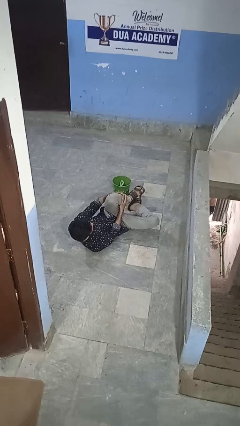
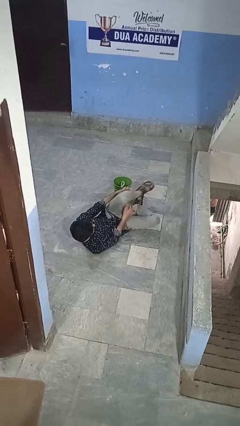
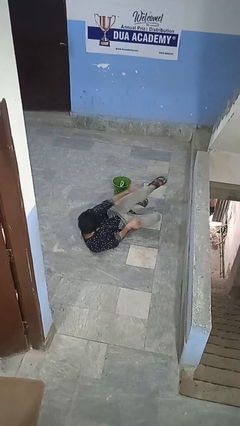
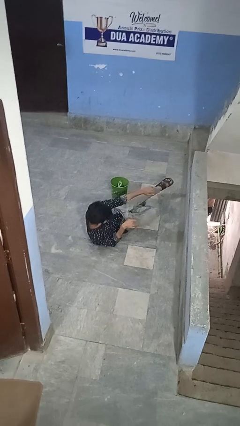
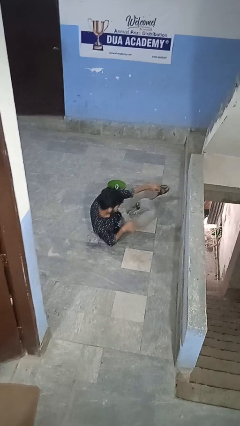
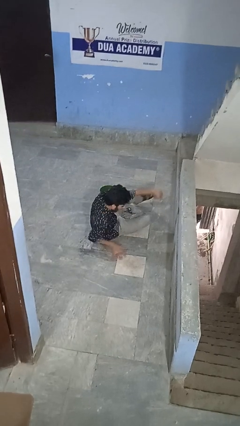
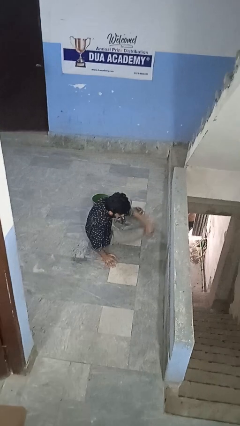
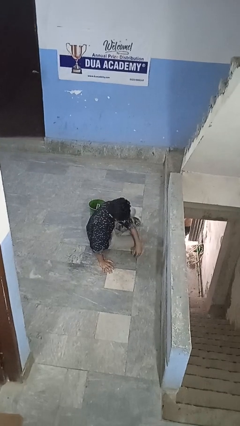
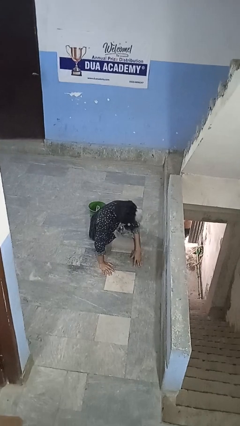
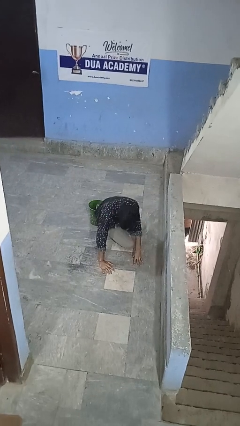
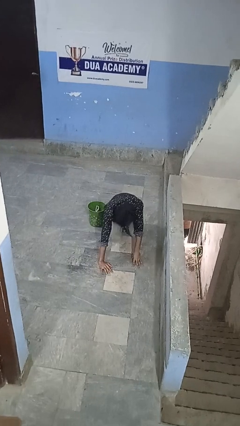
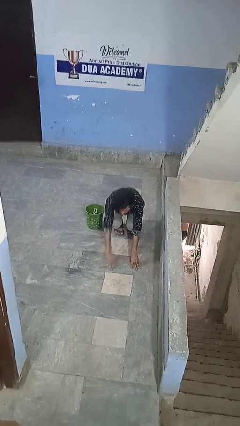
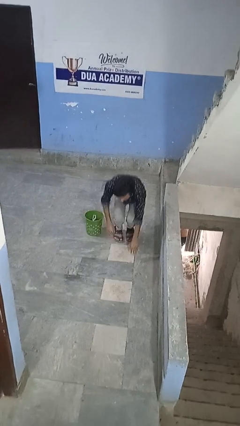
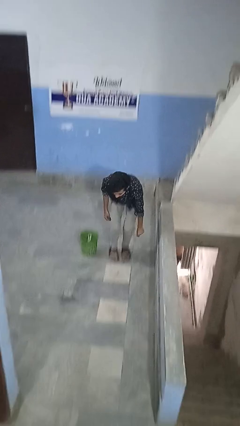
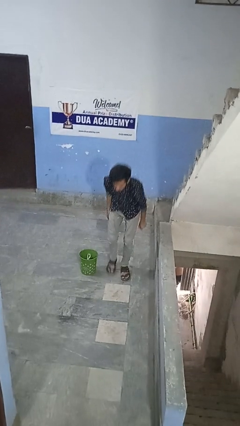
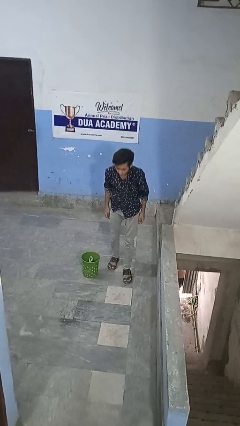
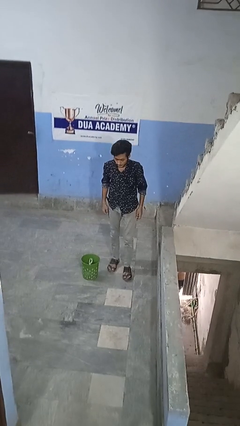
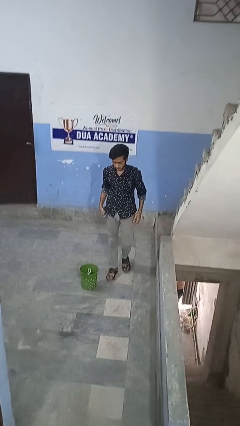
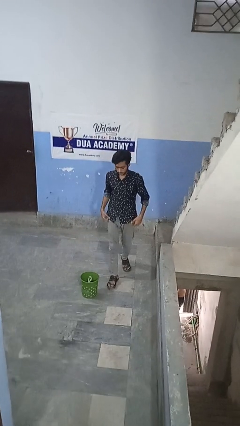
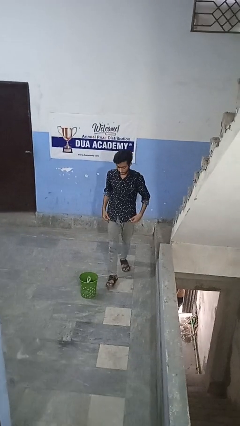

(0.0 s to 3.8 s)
person stands up from floor

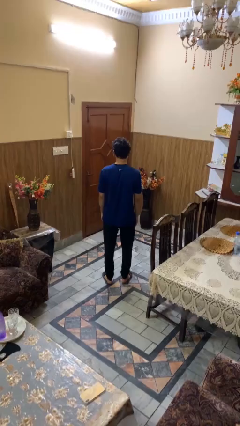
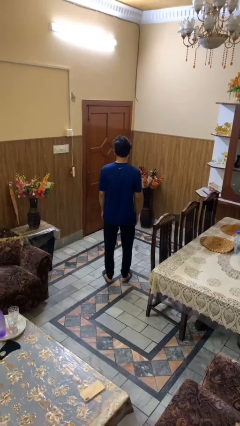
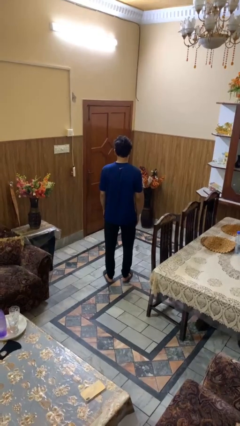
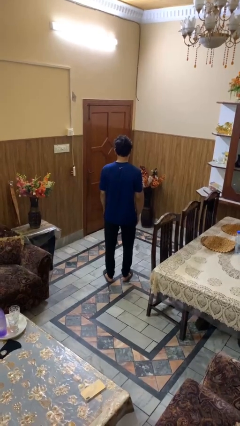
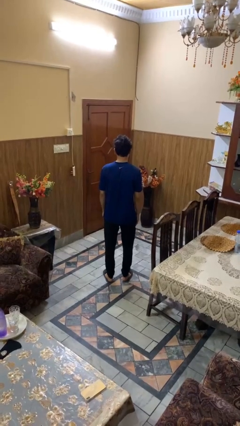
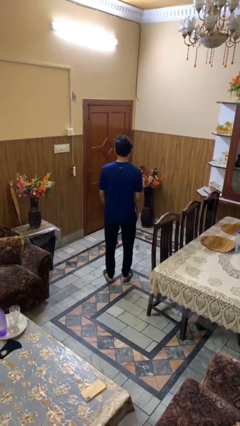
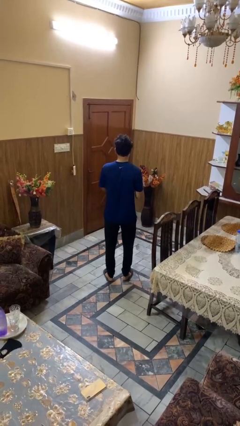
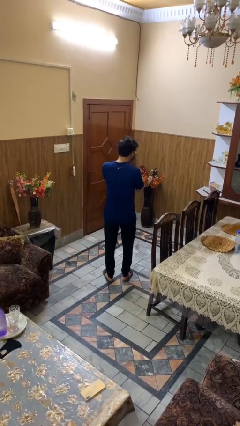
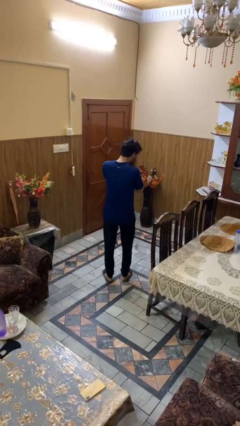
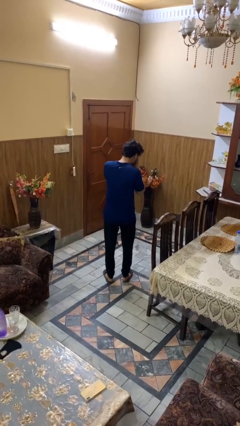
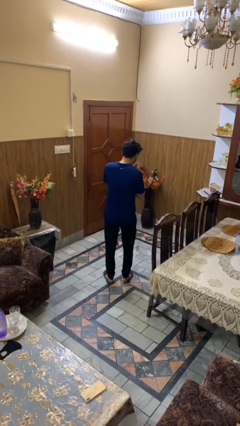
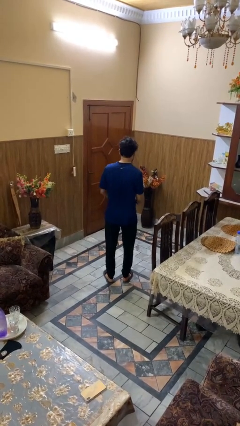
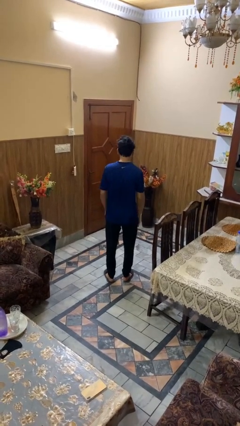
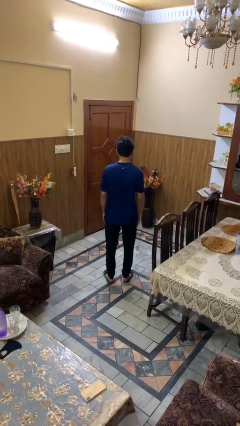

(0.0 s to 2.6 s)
person sneezes into hand

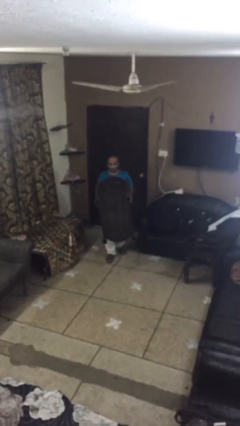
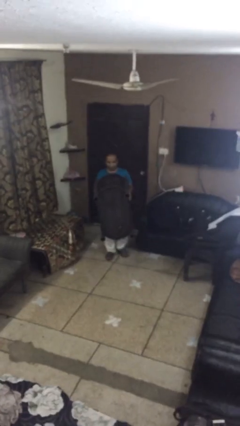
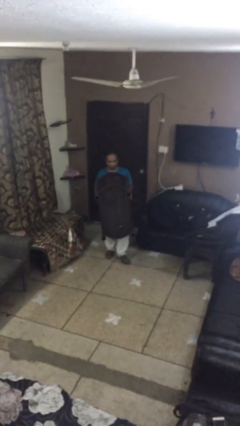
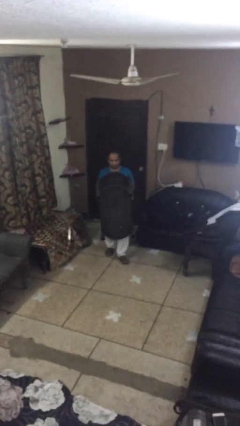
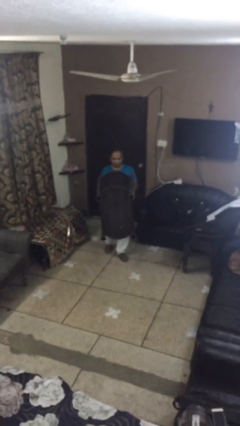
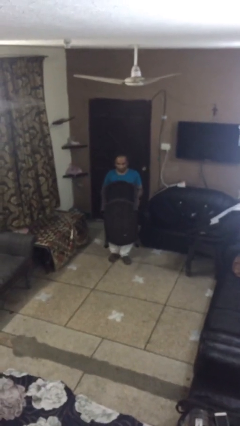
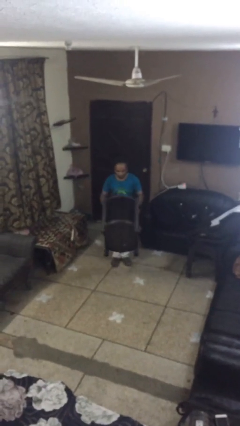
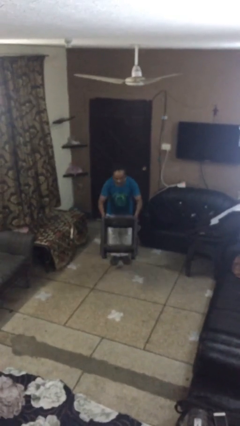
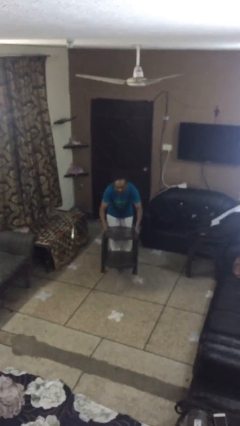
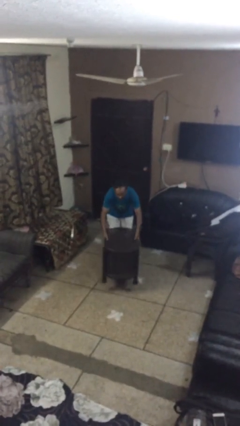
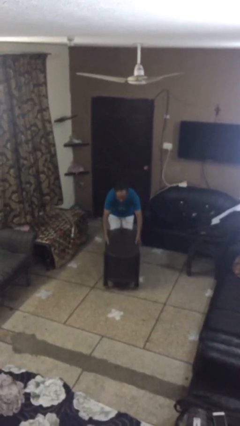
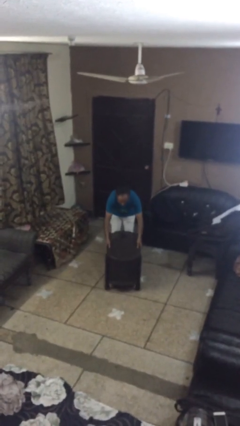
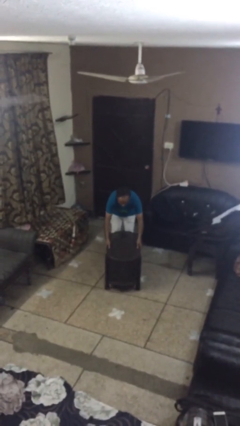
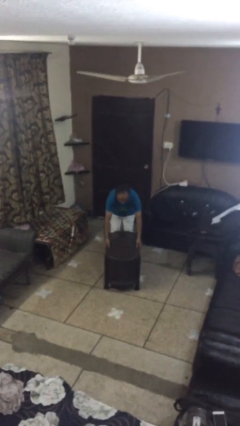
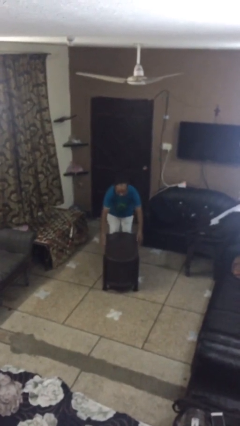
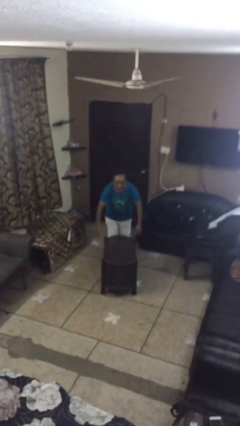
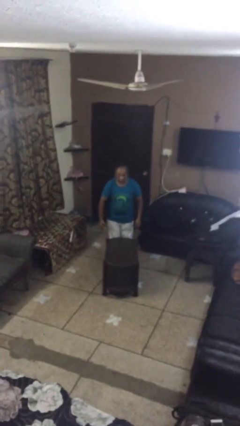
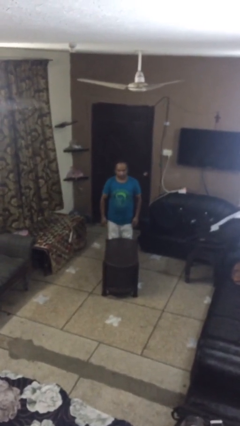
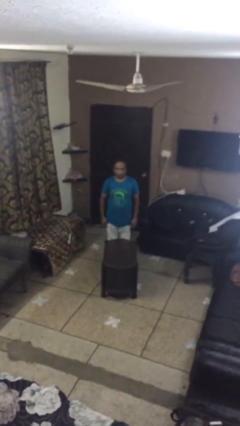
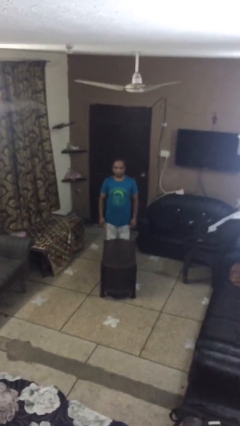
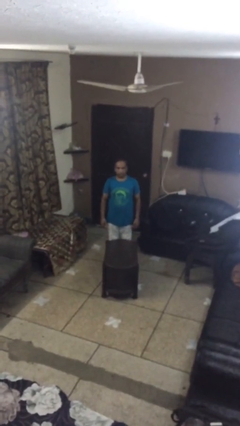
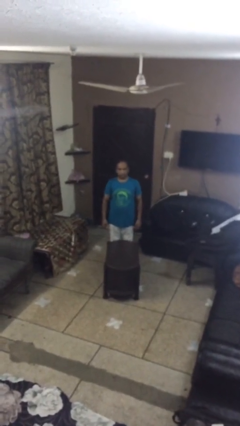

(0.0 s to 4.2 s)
person puts down object on floor

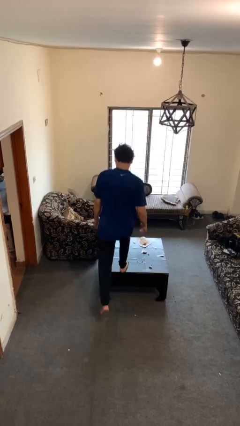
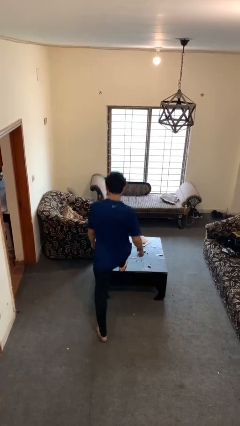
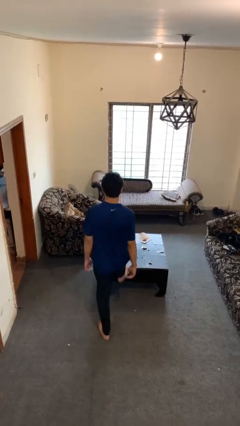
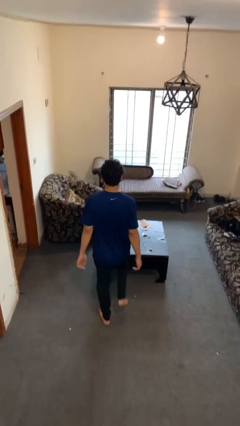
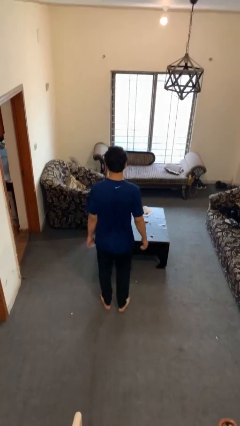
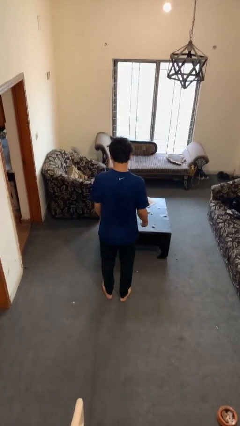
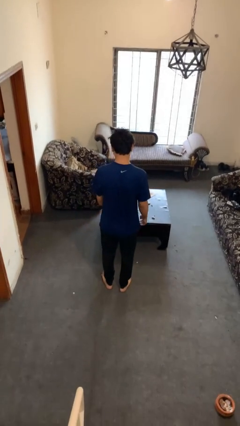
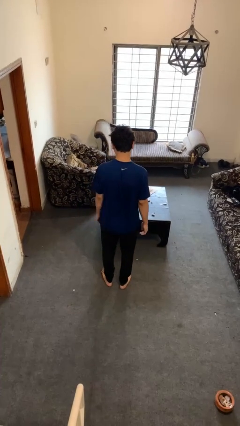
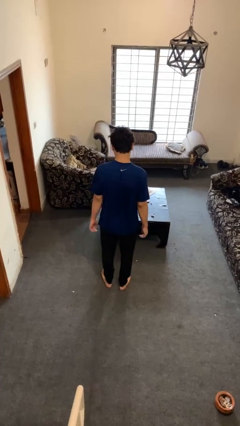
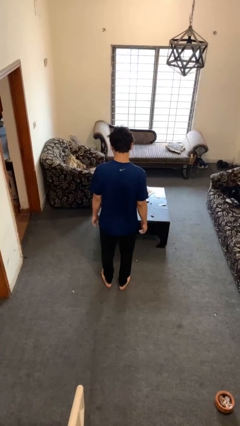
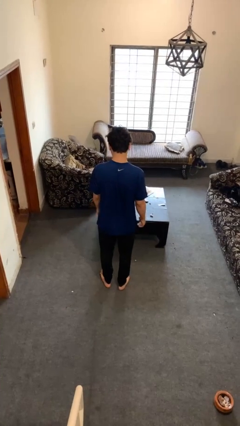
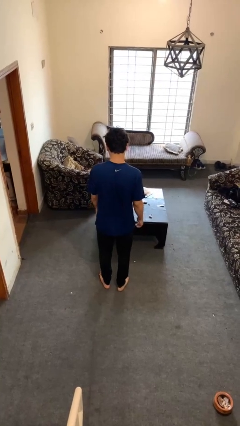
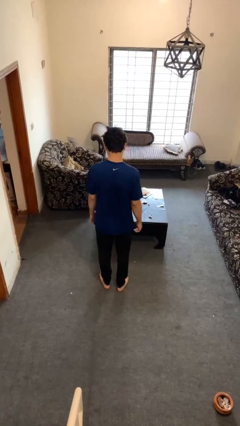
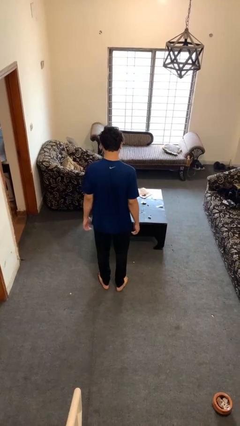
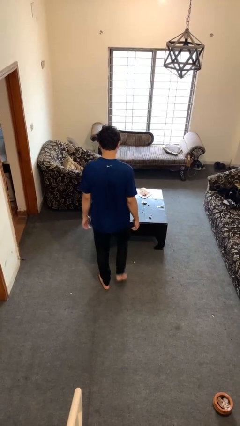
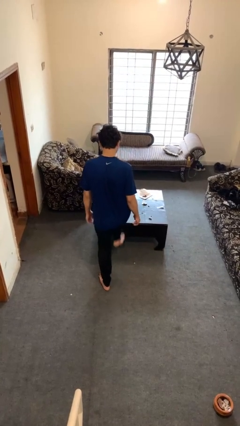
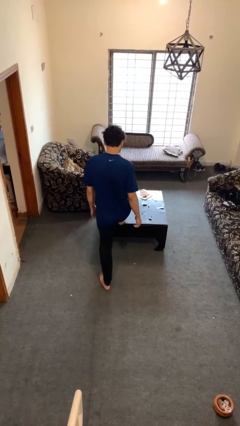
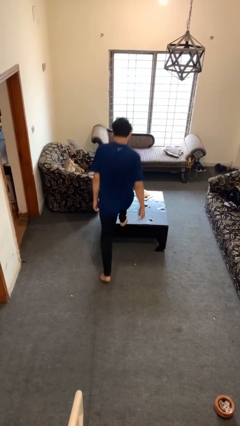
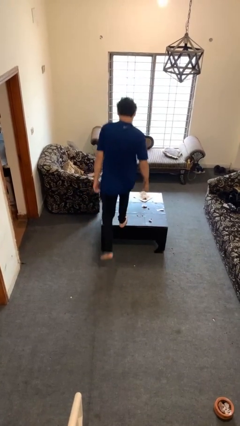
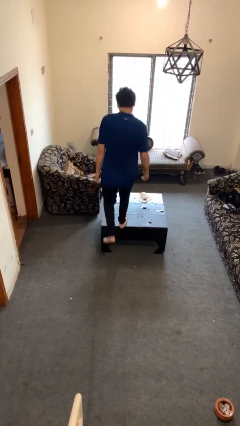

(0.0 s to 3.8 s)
person climbs off table

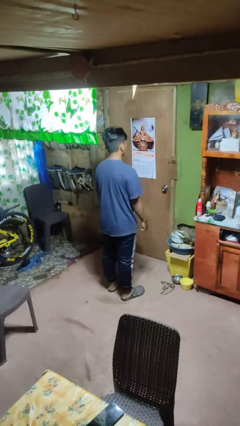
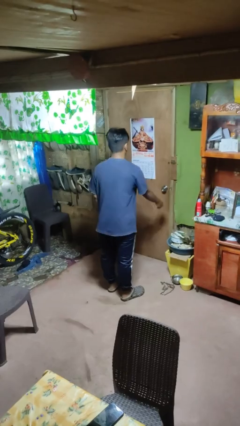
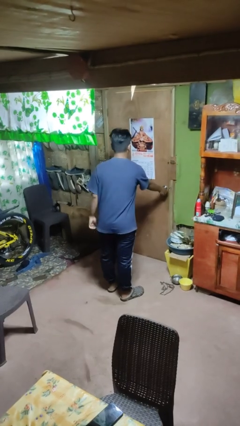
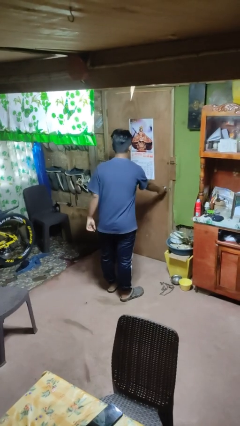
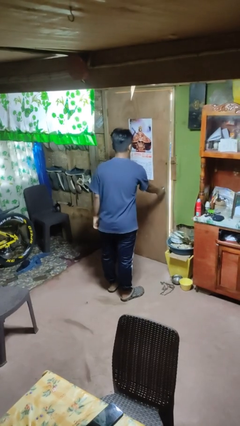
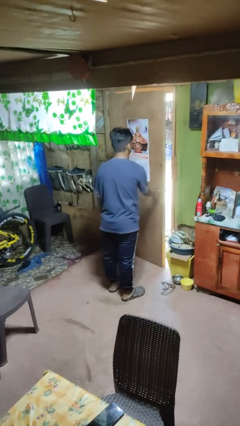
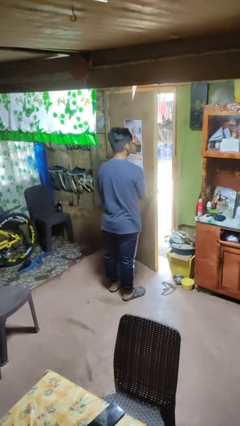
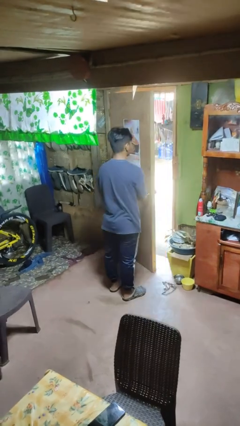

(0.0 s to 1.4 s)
person opens facility door

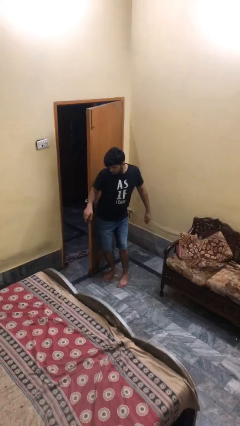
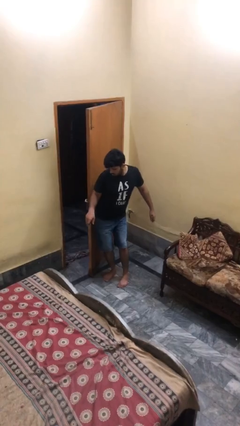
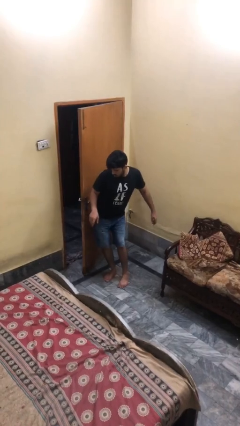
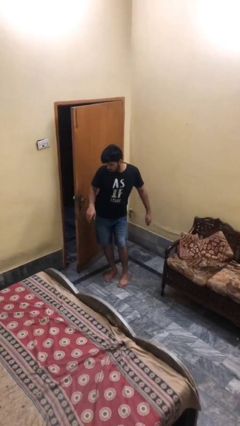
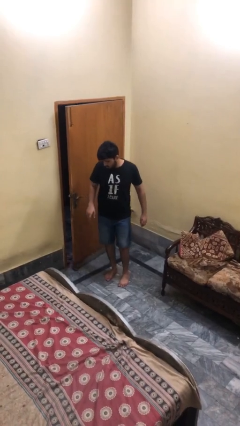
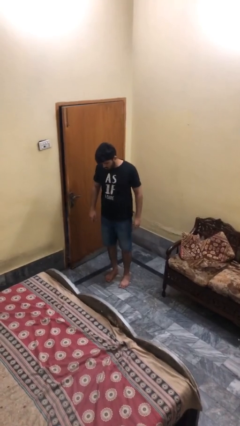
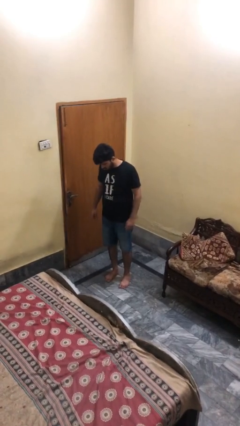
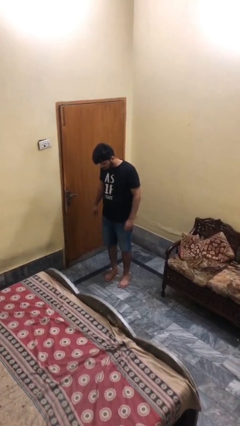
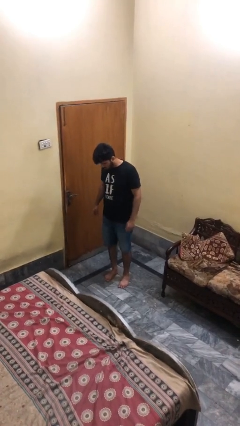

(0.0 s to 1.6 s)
person closes door with hip
